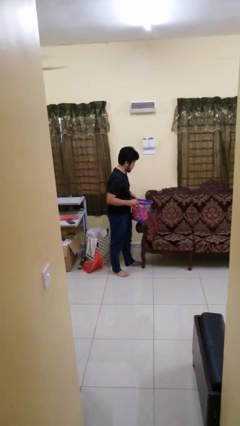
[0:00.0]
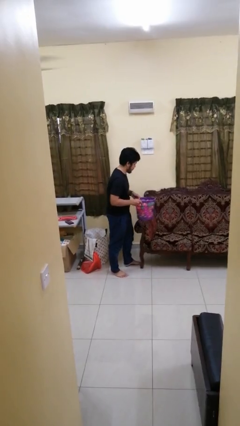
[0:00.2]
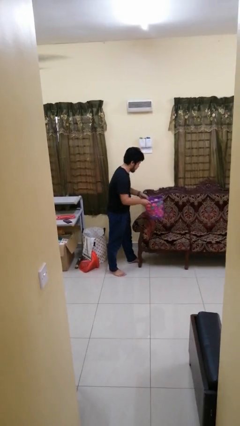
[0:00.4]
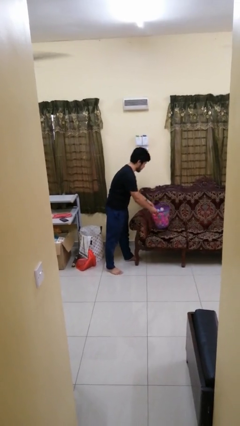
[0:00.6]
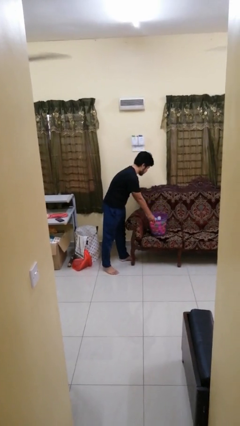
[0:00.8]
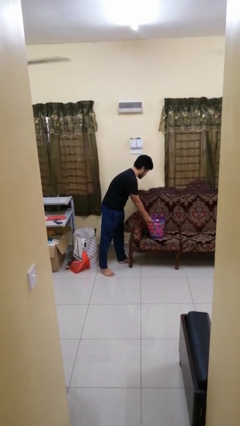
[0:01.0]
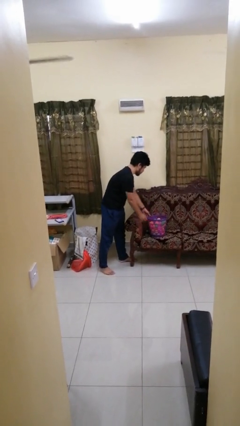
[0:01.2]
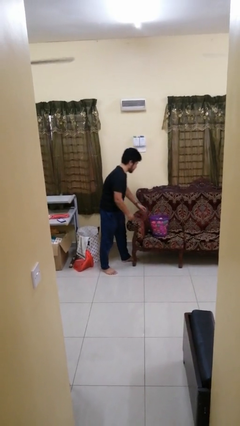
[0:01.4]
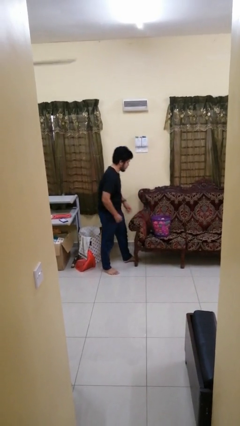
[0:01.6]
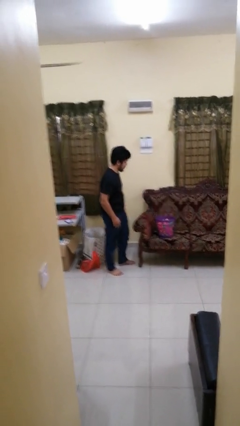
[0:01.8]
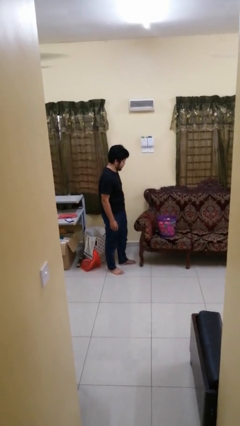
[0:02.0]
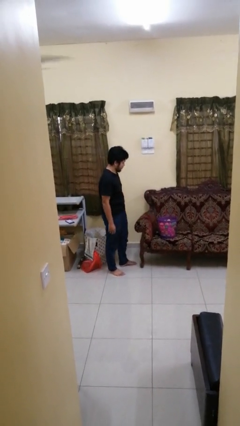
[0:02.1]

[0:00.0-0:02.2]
person picks up object from couch

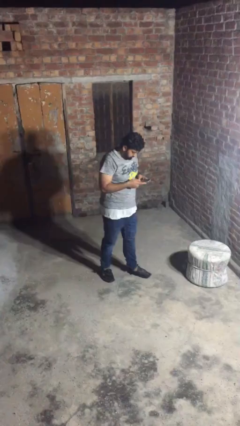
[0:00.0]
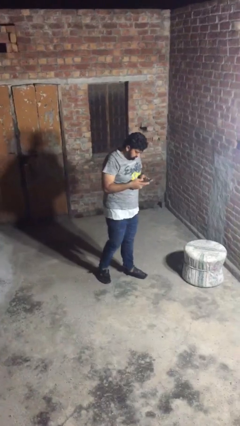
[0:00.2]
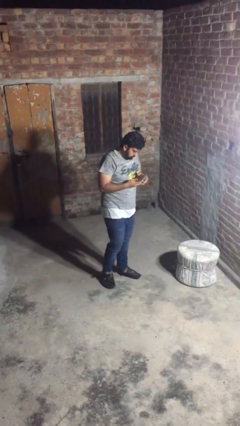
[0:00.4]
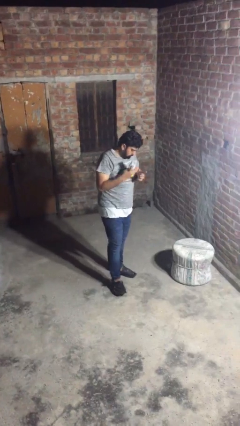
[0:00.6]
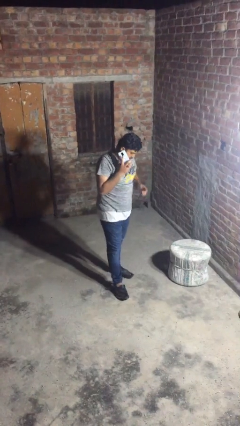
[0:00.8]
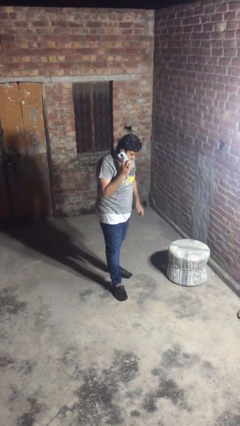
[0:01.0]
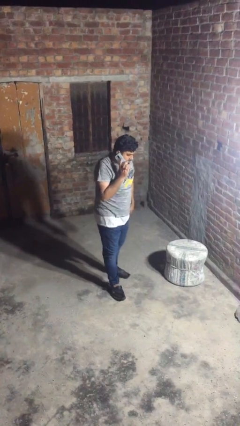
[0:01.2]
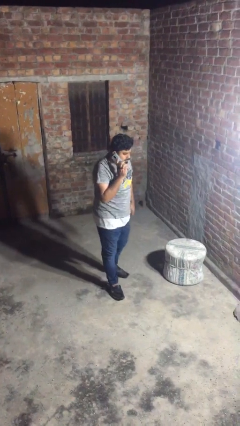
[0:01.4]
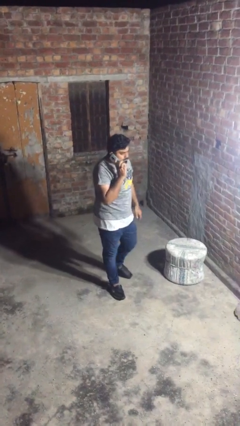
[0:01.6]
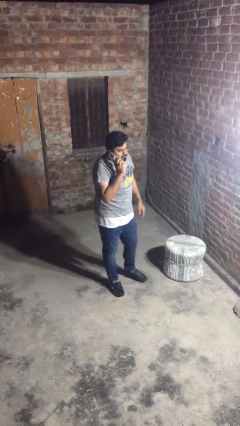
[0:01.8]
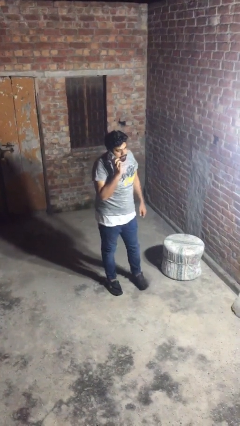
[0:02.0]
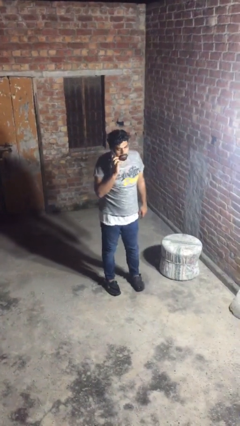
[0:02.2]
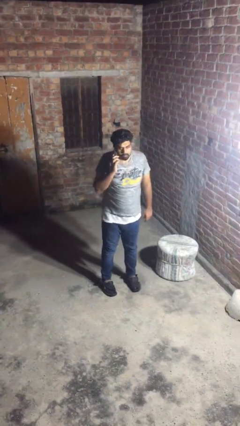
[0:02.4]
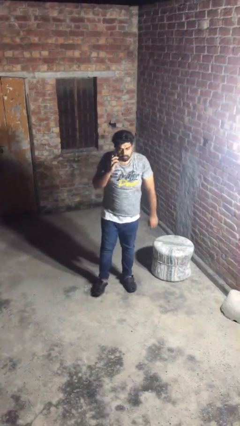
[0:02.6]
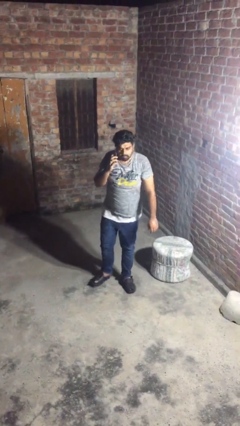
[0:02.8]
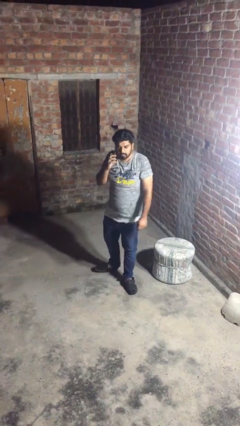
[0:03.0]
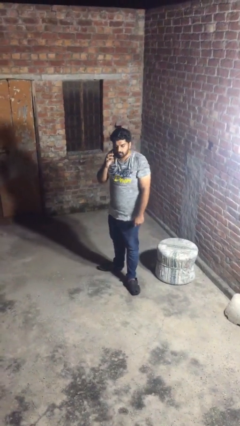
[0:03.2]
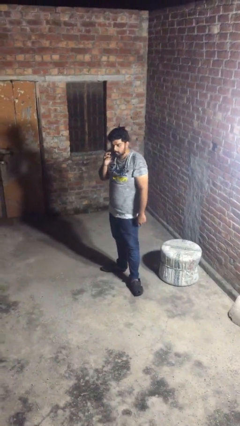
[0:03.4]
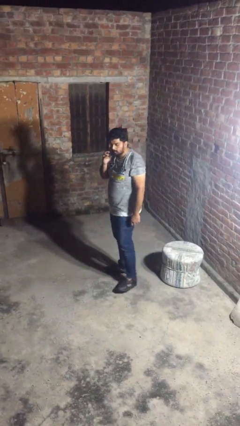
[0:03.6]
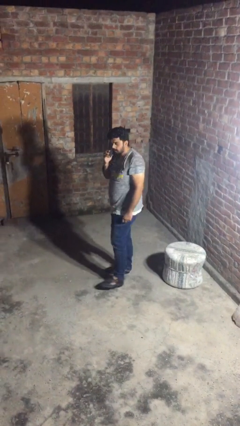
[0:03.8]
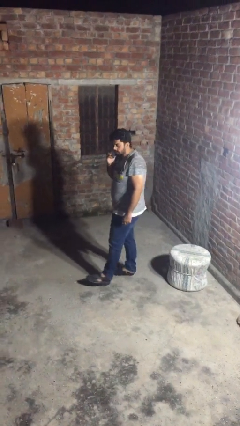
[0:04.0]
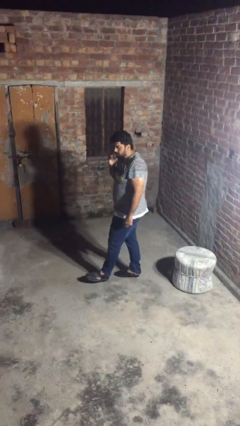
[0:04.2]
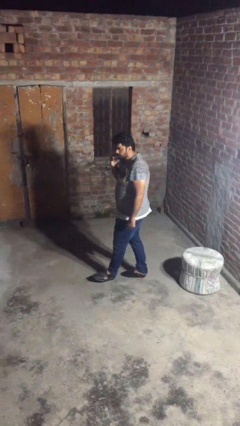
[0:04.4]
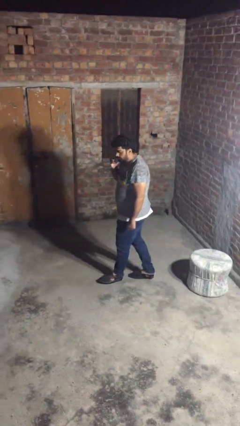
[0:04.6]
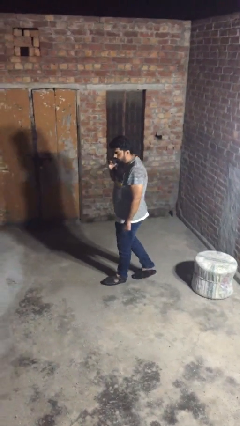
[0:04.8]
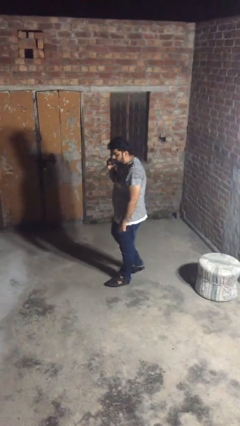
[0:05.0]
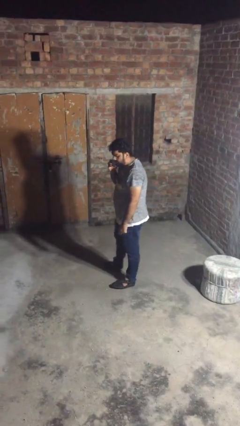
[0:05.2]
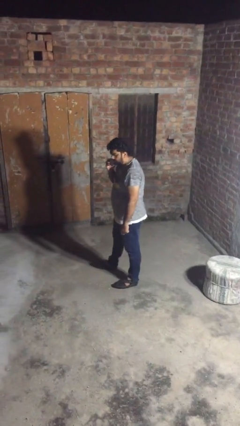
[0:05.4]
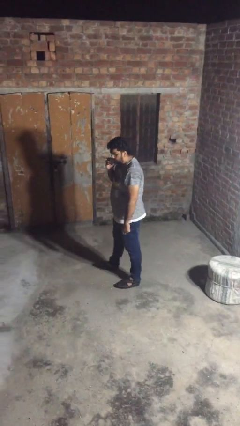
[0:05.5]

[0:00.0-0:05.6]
person talks on phone

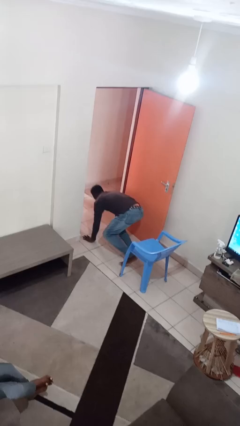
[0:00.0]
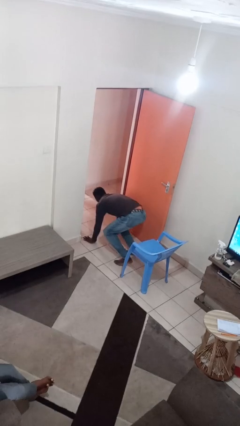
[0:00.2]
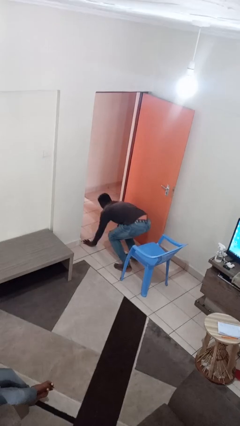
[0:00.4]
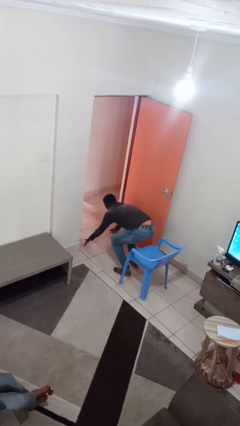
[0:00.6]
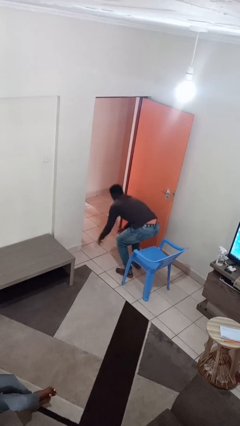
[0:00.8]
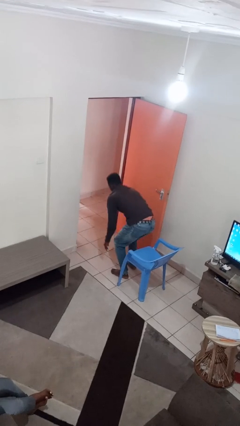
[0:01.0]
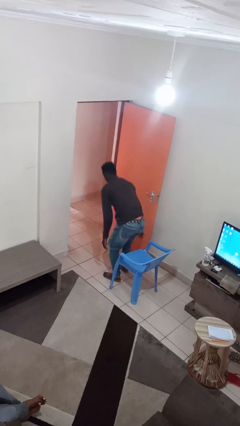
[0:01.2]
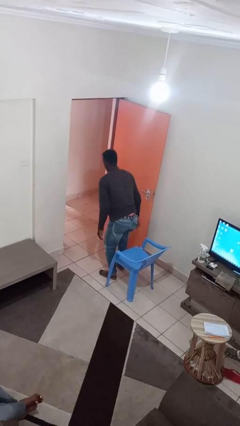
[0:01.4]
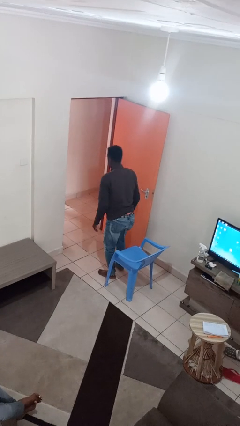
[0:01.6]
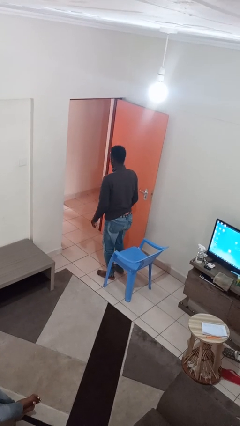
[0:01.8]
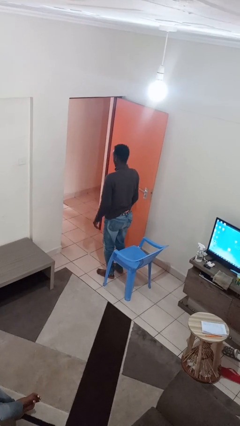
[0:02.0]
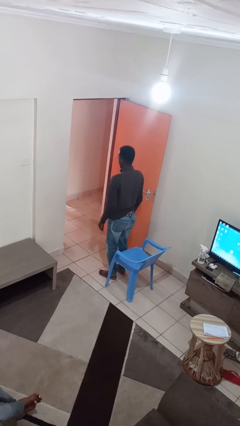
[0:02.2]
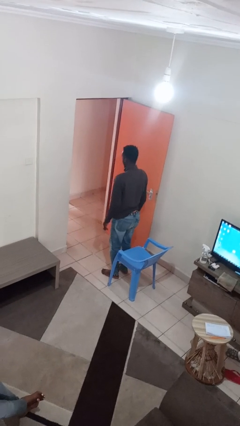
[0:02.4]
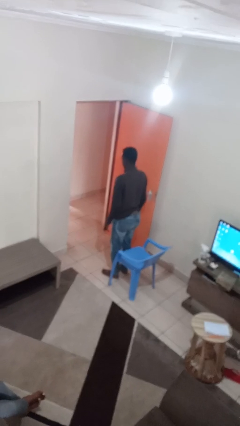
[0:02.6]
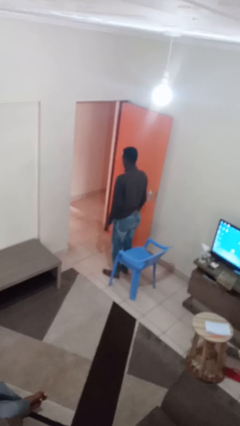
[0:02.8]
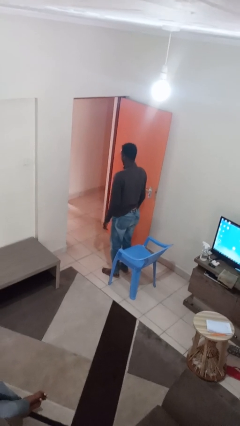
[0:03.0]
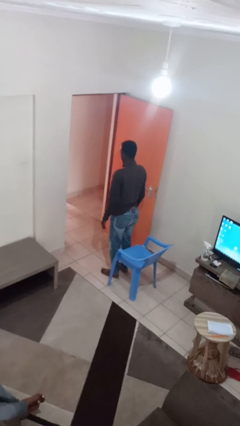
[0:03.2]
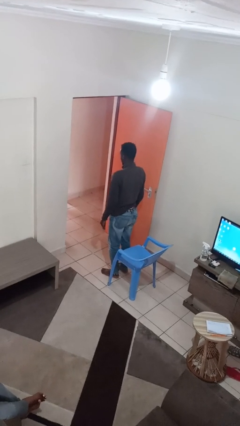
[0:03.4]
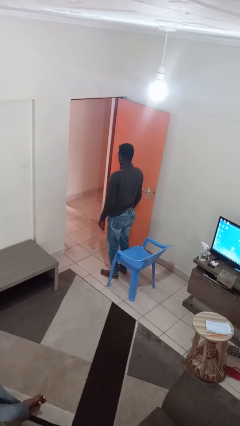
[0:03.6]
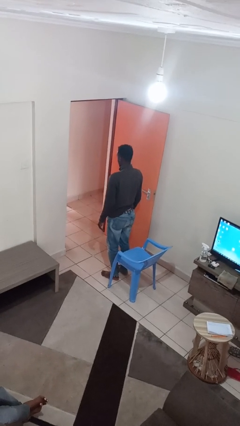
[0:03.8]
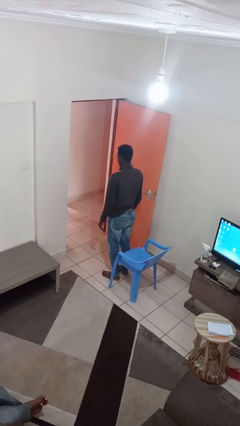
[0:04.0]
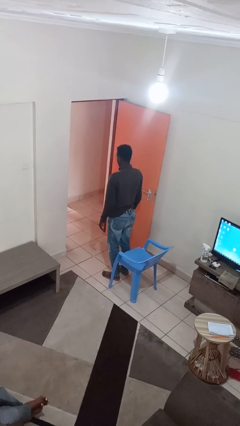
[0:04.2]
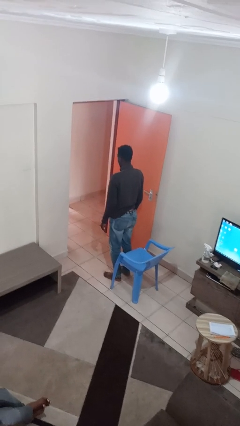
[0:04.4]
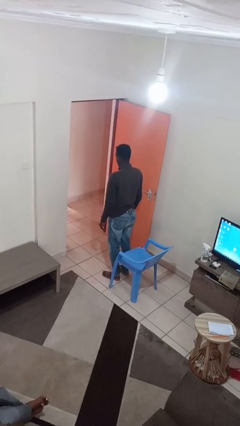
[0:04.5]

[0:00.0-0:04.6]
person stands up from floor

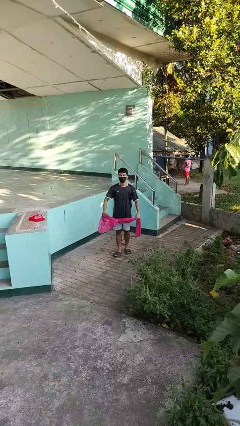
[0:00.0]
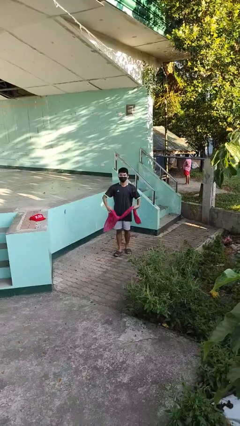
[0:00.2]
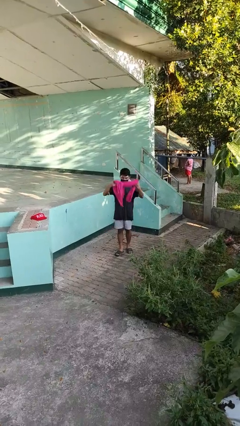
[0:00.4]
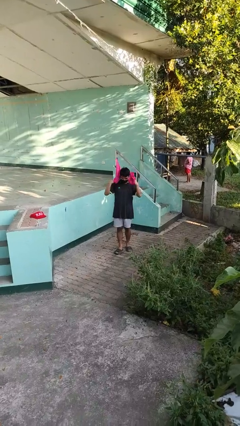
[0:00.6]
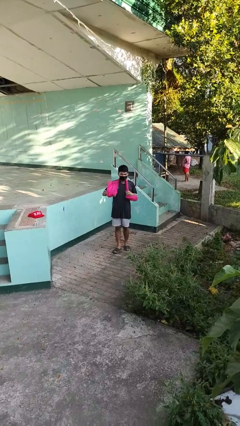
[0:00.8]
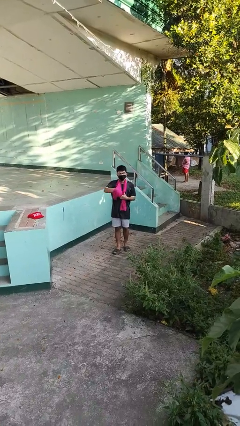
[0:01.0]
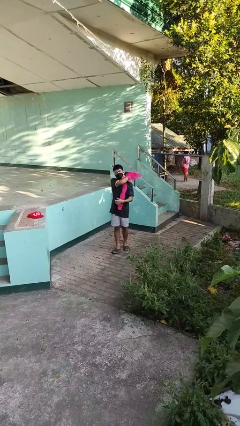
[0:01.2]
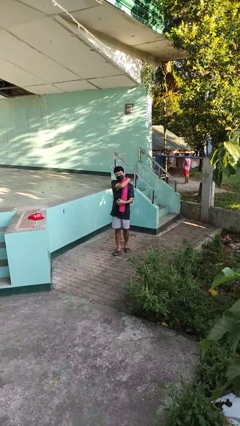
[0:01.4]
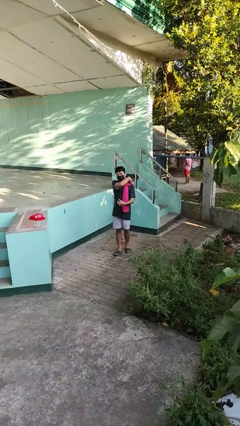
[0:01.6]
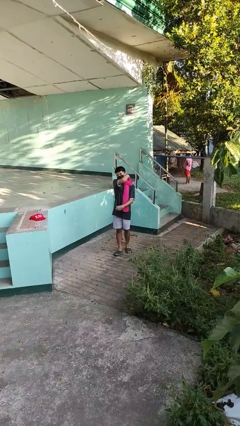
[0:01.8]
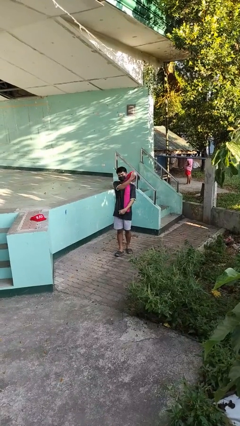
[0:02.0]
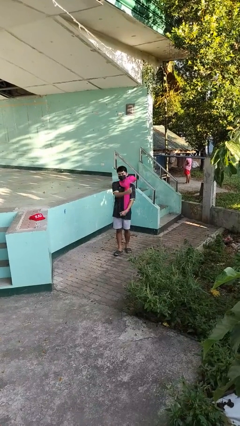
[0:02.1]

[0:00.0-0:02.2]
person puts on scarf

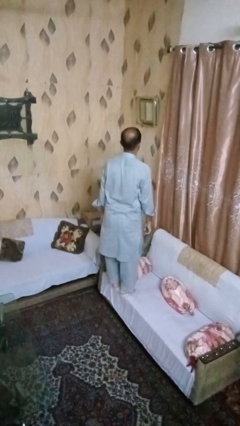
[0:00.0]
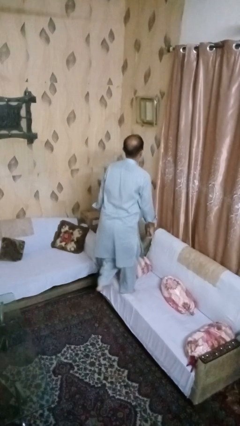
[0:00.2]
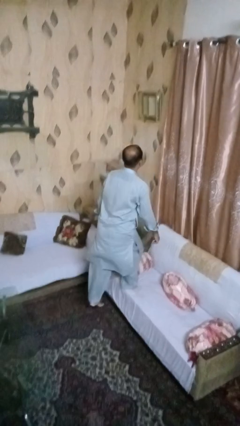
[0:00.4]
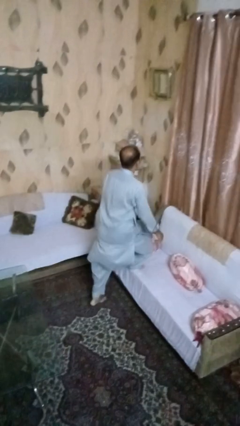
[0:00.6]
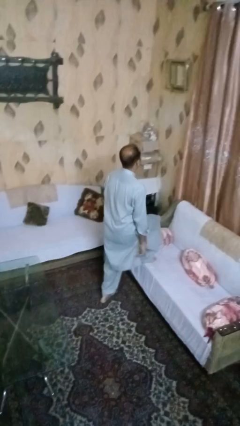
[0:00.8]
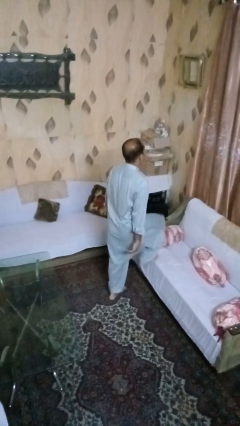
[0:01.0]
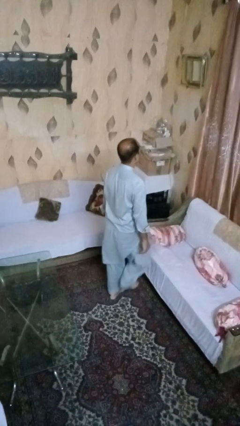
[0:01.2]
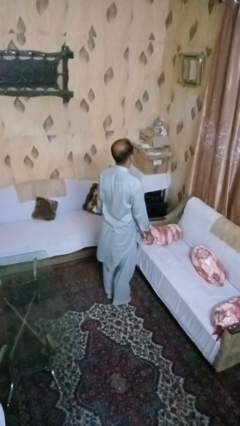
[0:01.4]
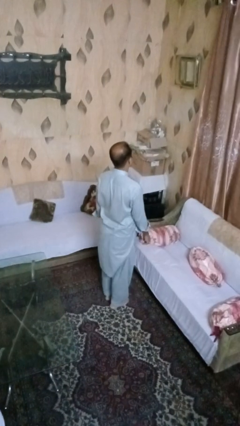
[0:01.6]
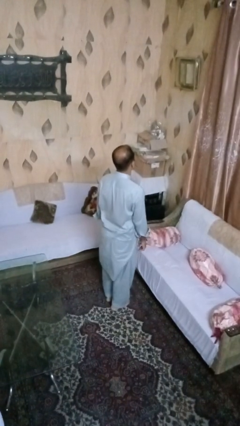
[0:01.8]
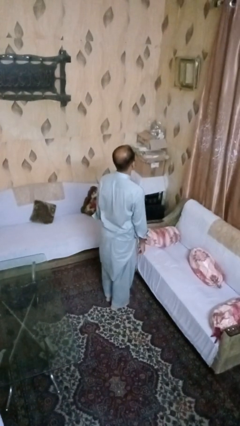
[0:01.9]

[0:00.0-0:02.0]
person climbs off couch

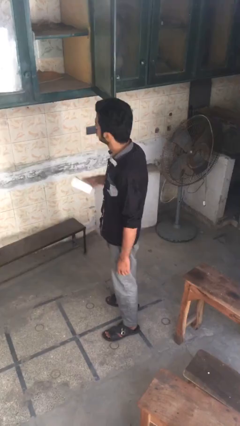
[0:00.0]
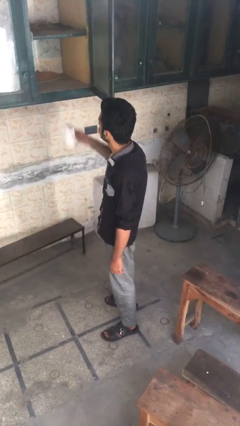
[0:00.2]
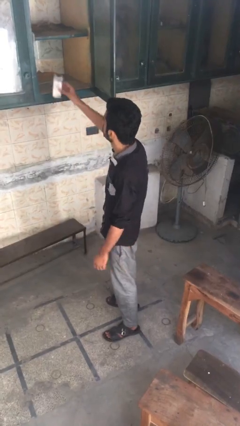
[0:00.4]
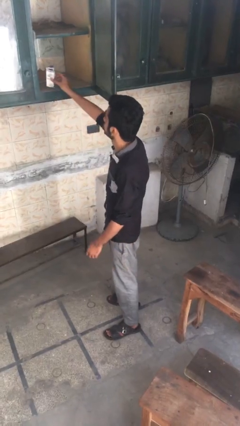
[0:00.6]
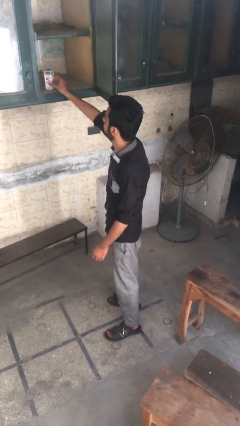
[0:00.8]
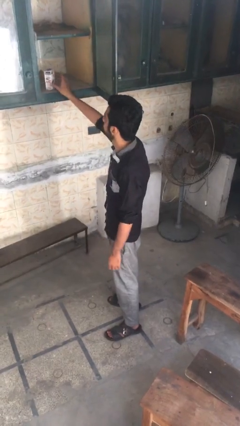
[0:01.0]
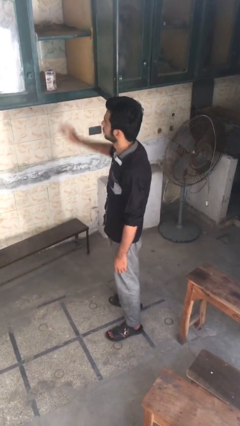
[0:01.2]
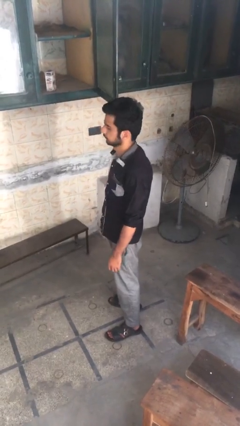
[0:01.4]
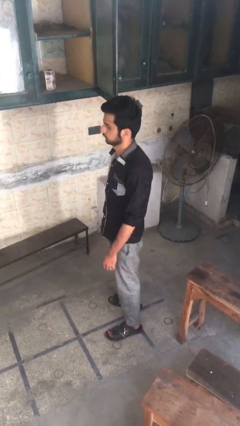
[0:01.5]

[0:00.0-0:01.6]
person puts object in cabinet
